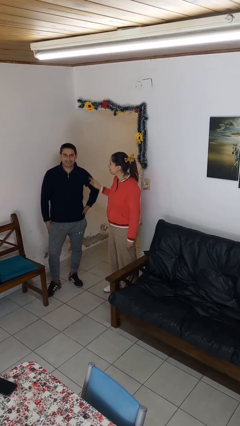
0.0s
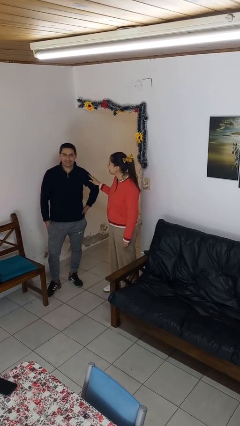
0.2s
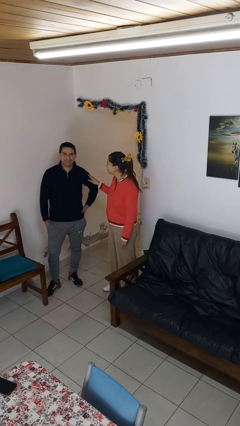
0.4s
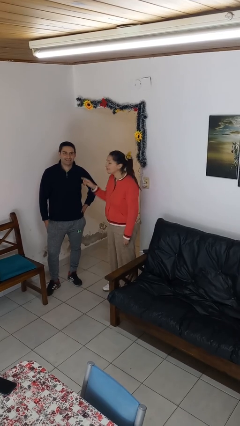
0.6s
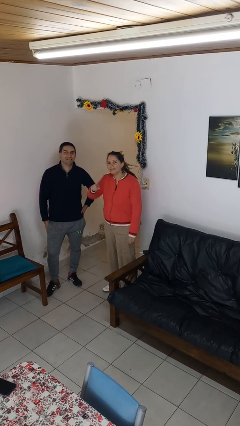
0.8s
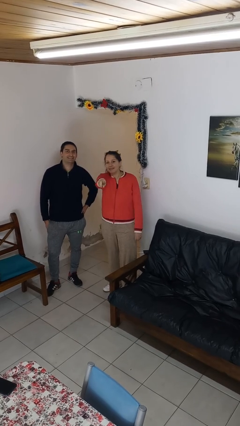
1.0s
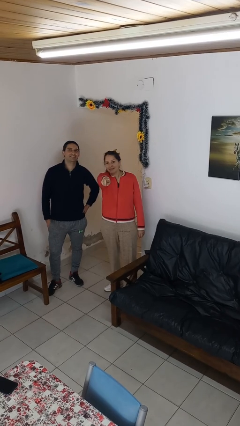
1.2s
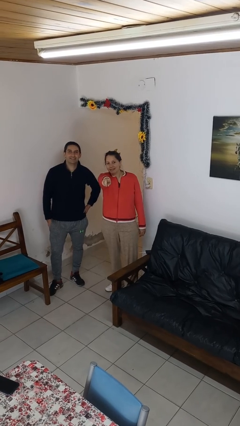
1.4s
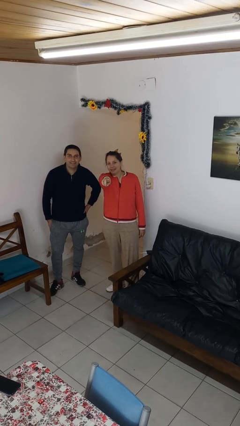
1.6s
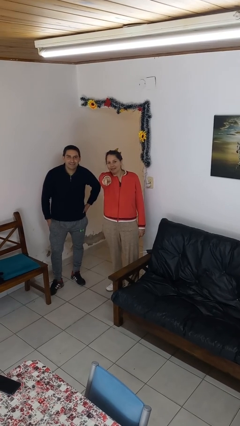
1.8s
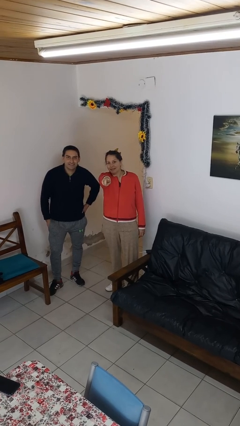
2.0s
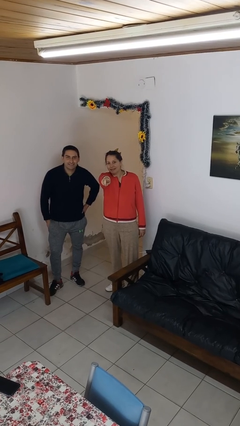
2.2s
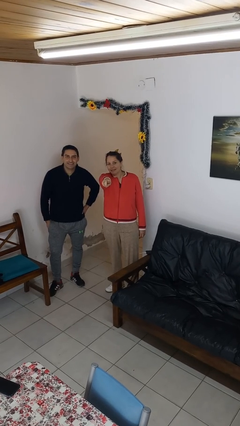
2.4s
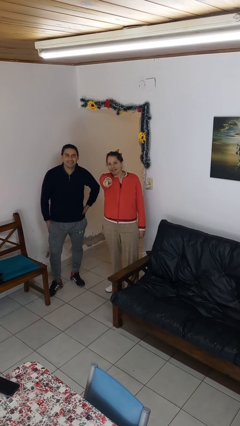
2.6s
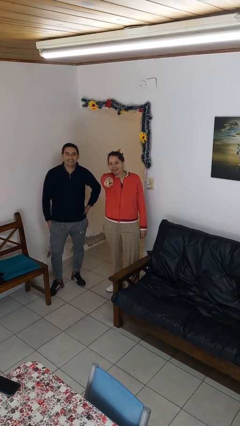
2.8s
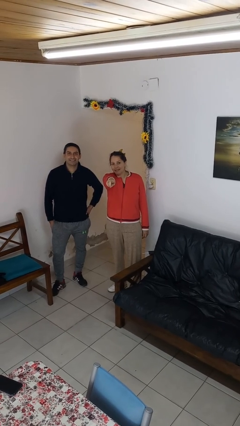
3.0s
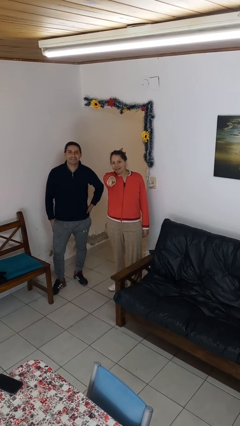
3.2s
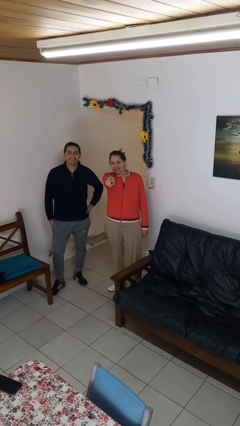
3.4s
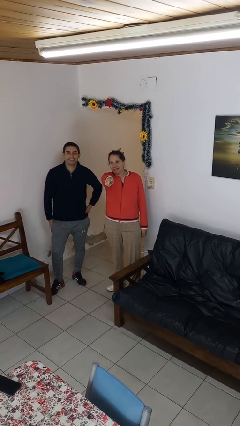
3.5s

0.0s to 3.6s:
person points at person

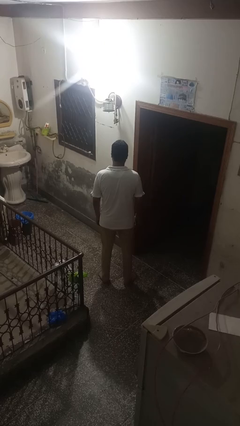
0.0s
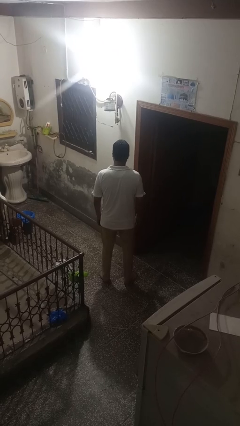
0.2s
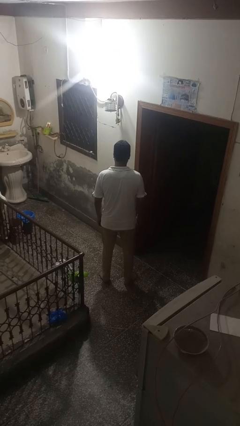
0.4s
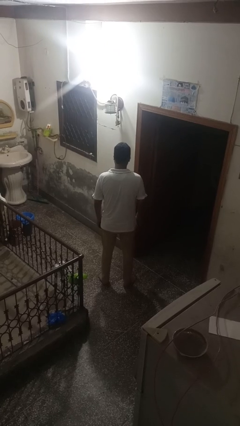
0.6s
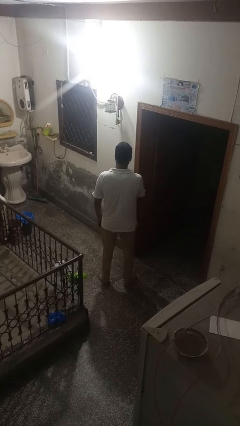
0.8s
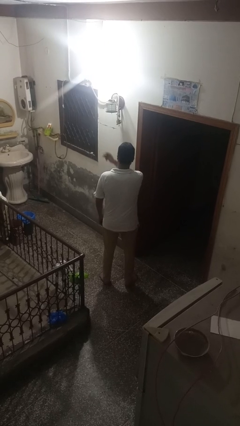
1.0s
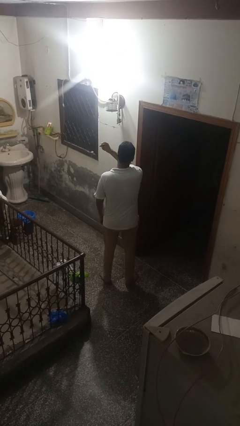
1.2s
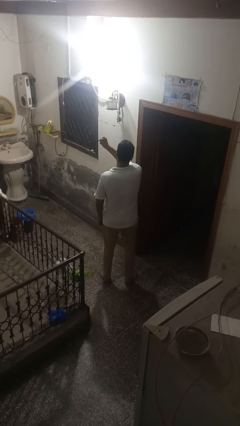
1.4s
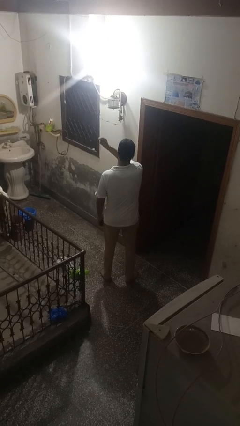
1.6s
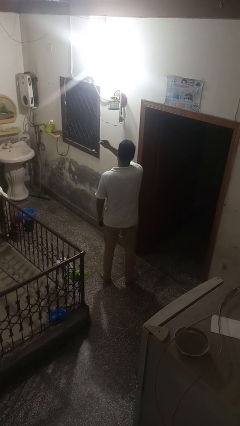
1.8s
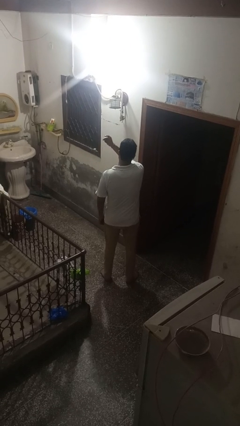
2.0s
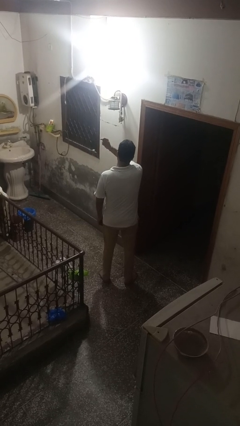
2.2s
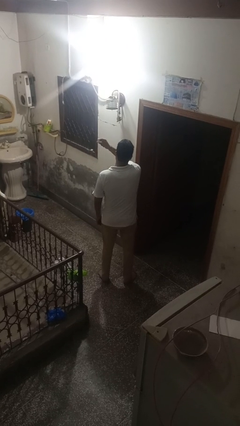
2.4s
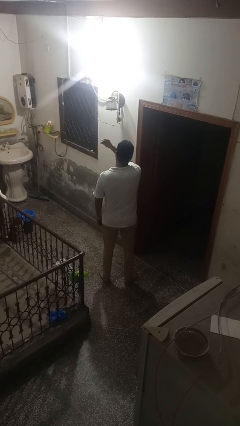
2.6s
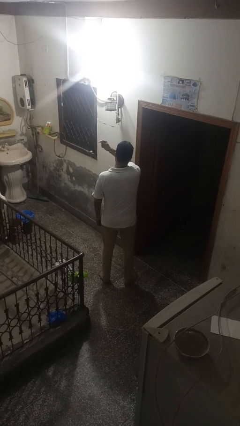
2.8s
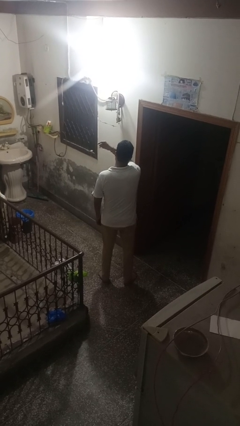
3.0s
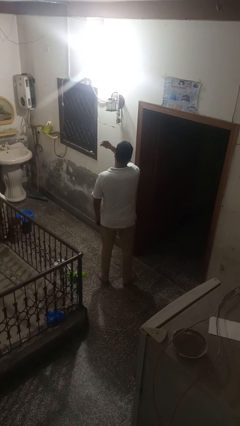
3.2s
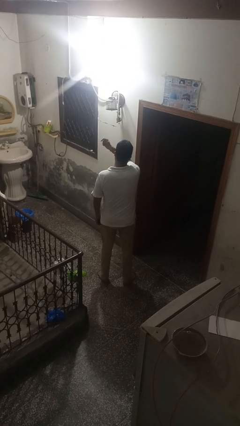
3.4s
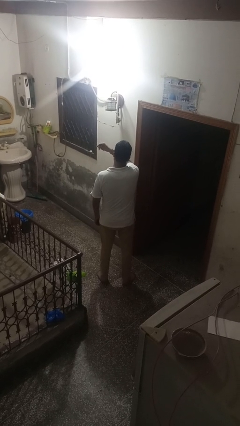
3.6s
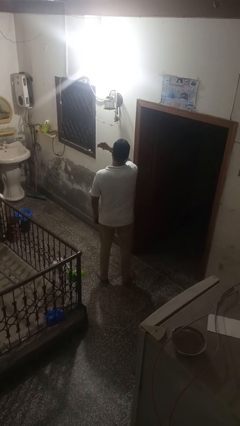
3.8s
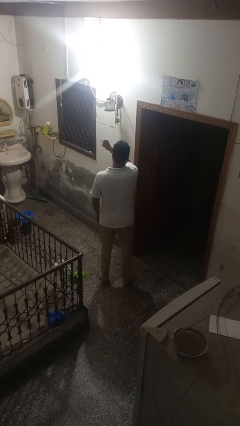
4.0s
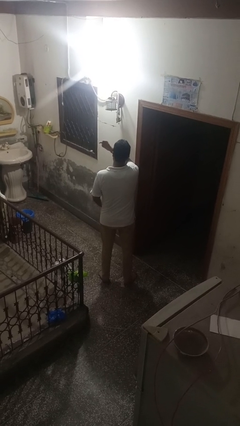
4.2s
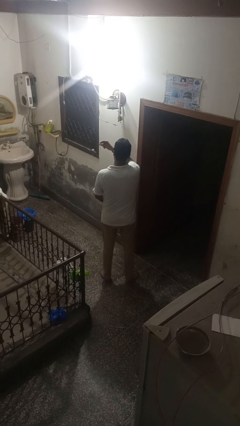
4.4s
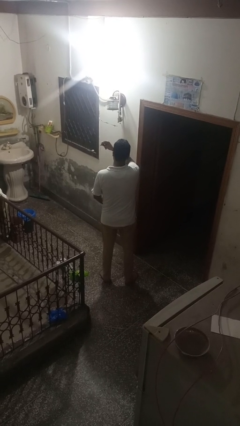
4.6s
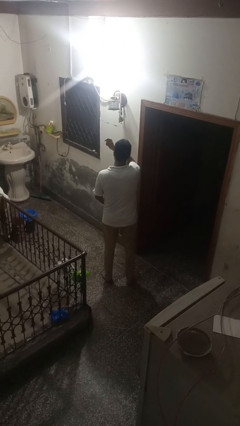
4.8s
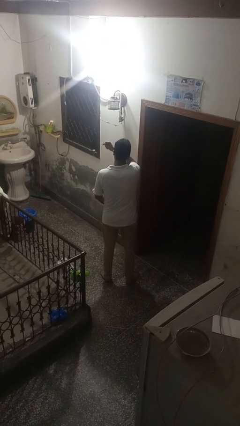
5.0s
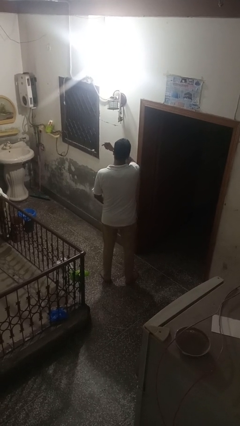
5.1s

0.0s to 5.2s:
person snaps fingers

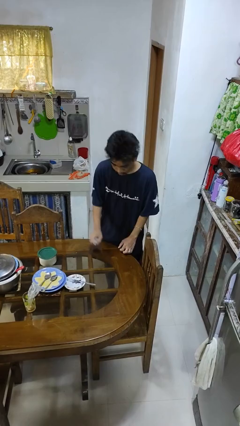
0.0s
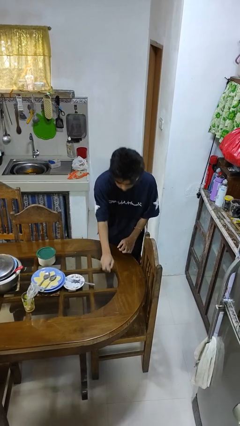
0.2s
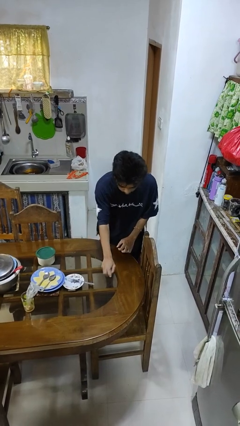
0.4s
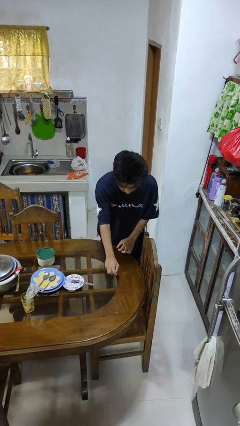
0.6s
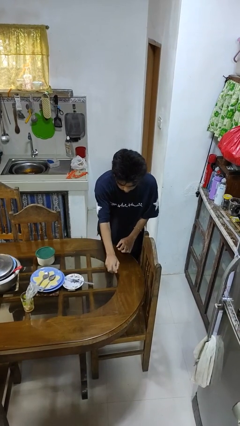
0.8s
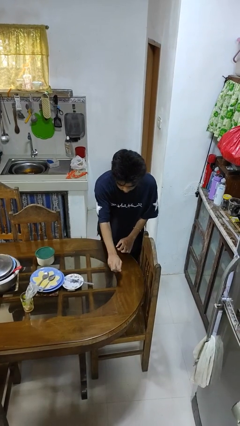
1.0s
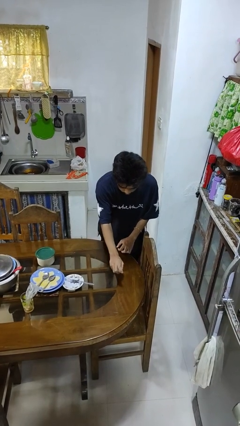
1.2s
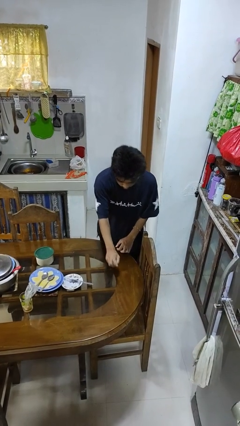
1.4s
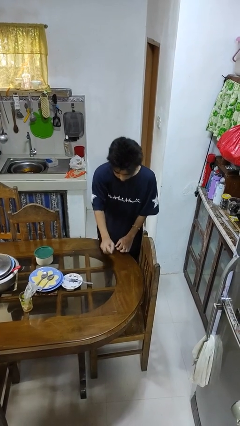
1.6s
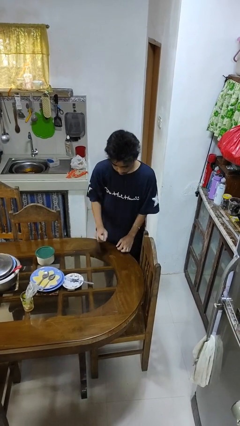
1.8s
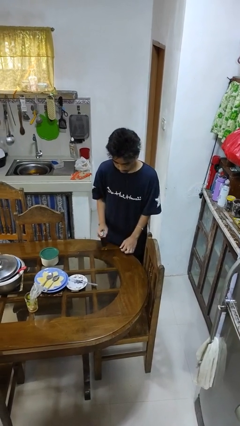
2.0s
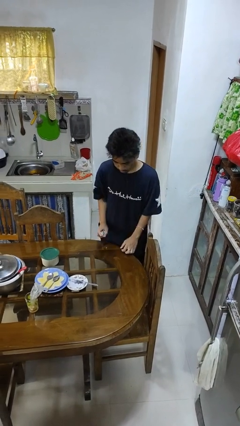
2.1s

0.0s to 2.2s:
person sprays from bottle

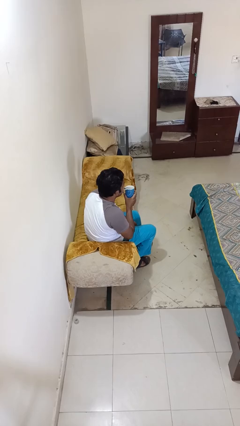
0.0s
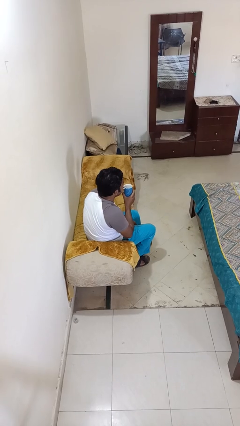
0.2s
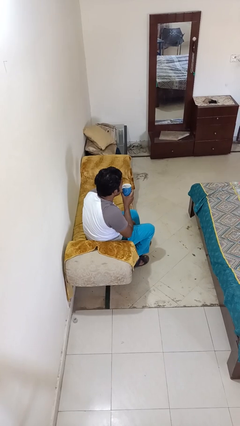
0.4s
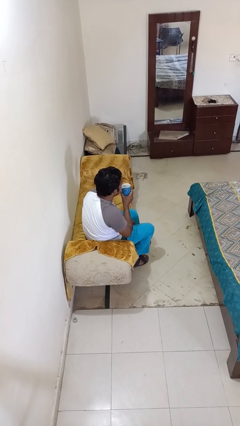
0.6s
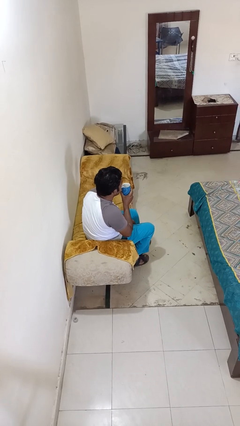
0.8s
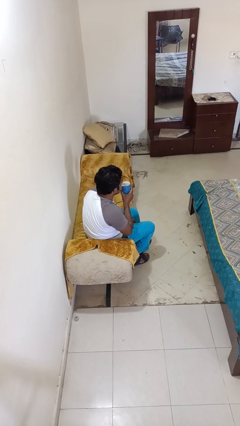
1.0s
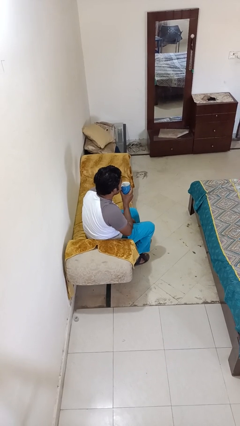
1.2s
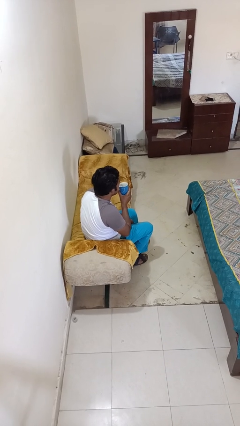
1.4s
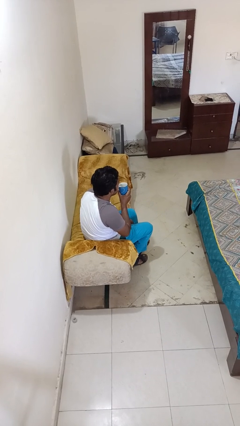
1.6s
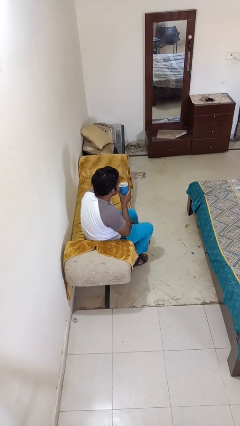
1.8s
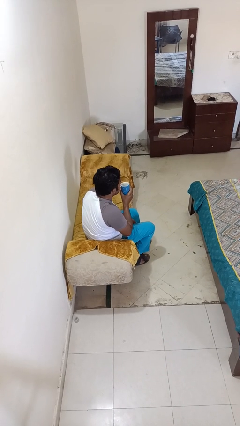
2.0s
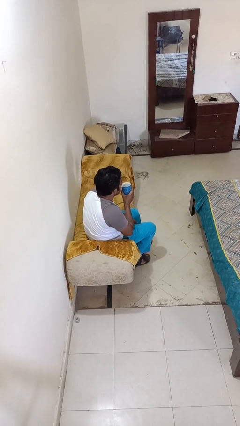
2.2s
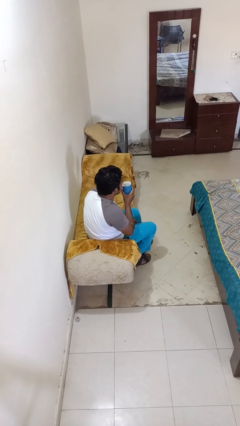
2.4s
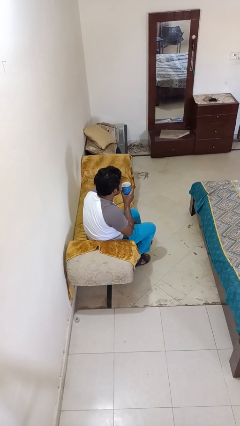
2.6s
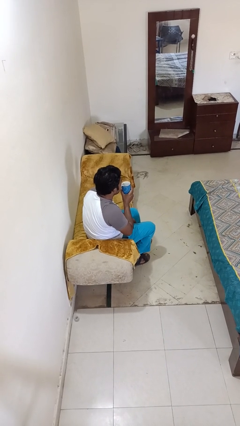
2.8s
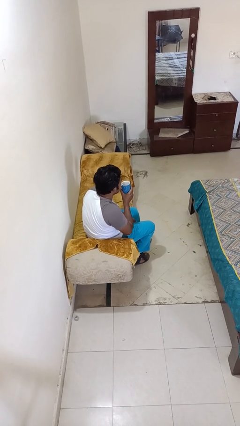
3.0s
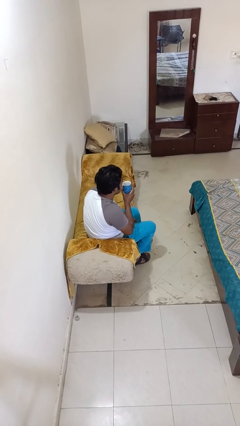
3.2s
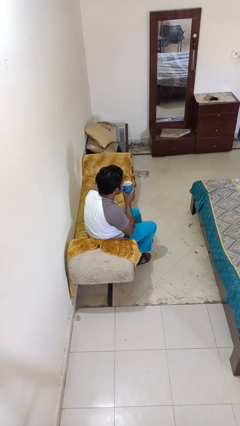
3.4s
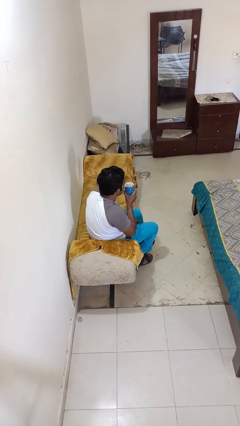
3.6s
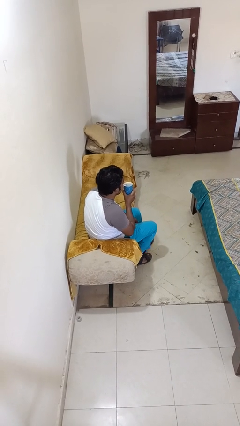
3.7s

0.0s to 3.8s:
person drinks from straw

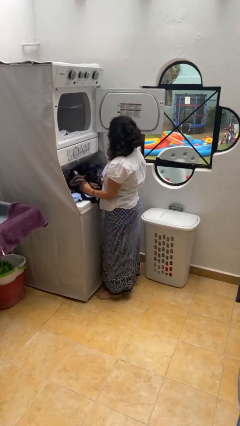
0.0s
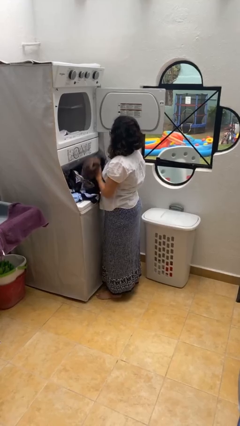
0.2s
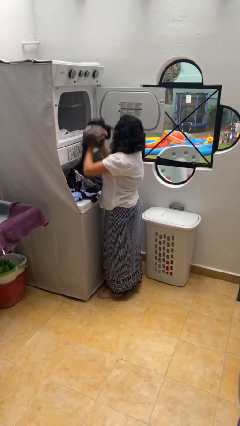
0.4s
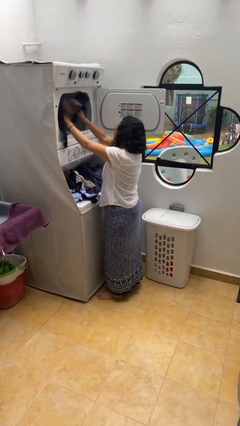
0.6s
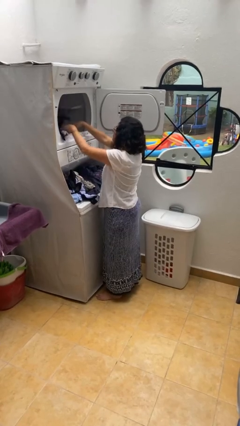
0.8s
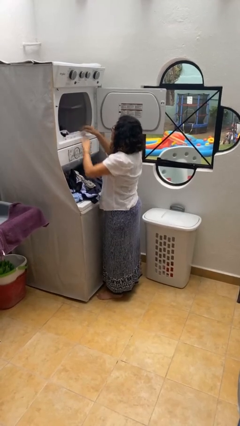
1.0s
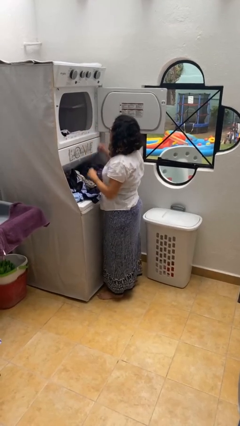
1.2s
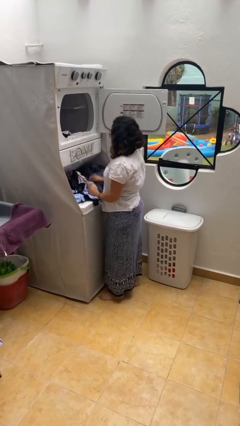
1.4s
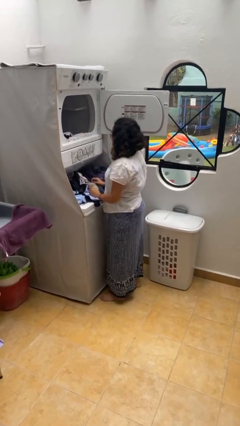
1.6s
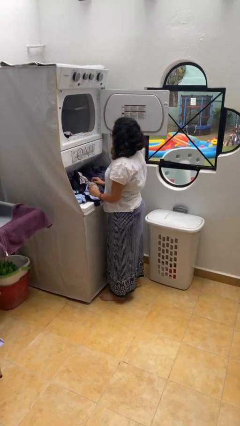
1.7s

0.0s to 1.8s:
person loads dryer

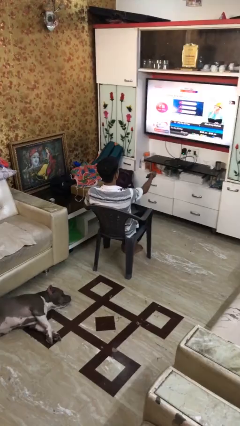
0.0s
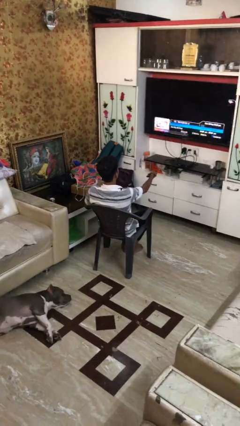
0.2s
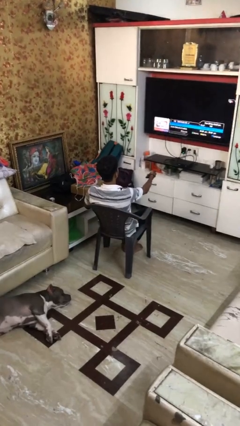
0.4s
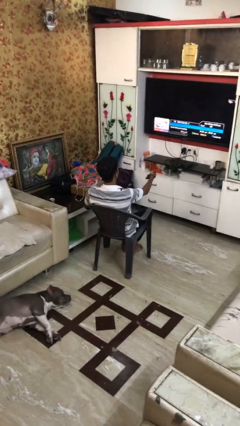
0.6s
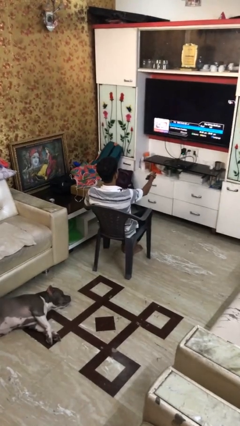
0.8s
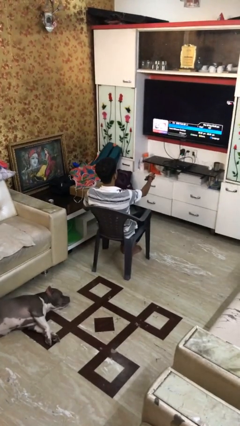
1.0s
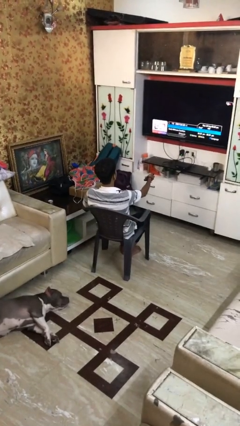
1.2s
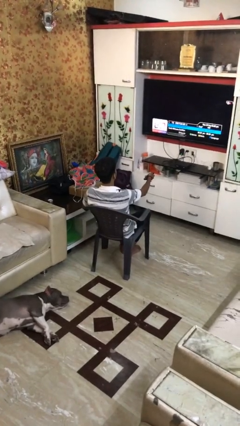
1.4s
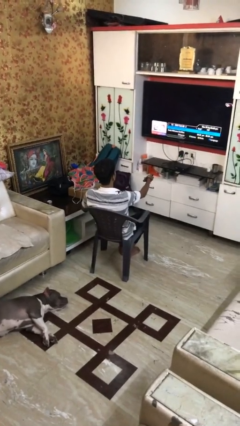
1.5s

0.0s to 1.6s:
person uses television remote
